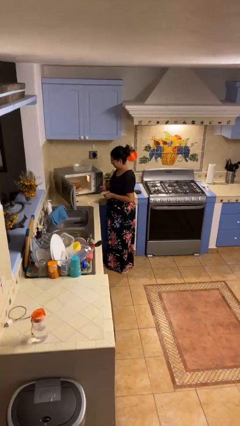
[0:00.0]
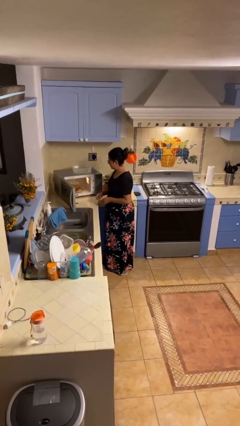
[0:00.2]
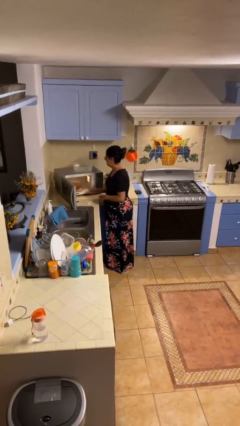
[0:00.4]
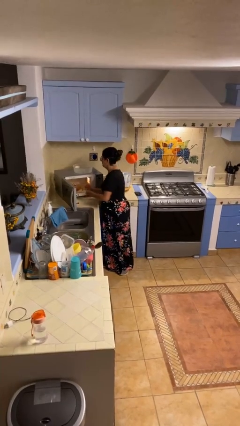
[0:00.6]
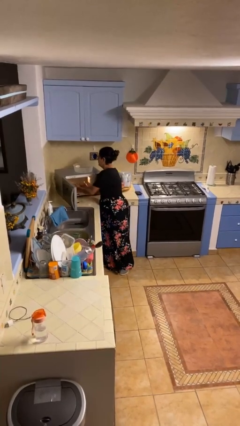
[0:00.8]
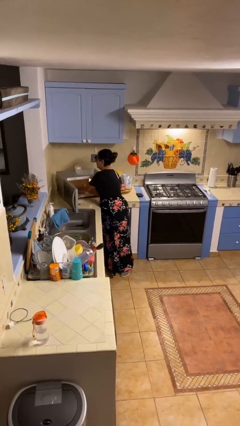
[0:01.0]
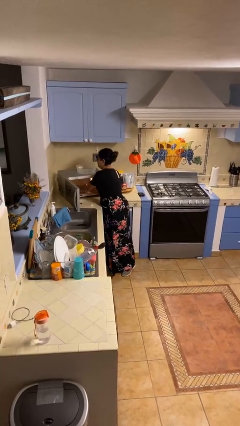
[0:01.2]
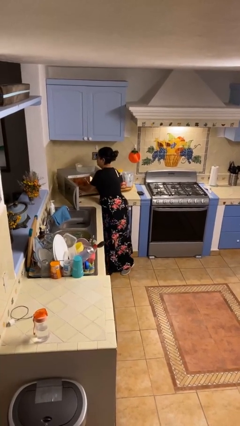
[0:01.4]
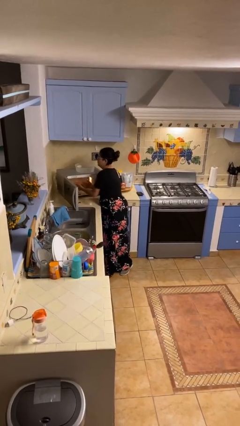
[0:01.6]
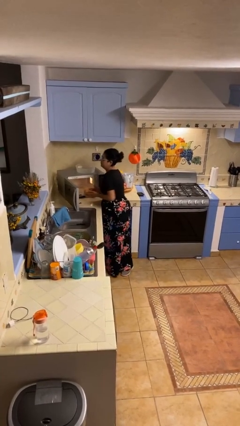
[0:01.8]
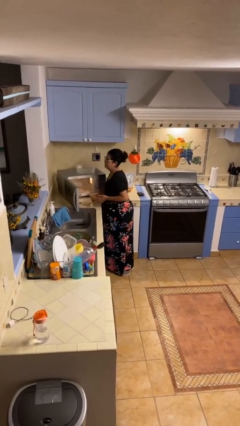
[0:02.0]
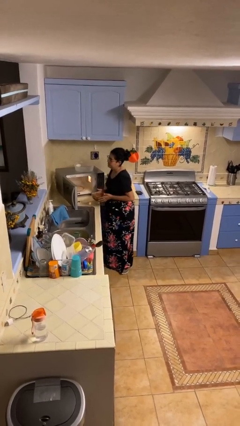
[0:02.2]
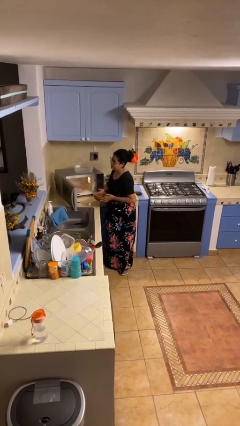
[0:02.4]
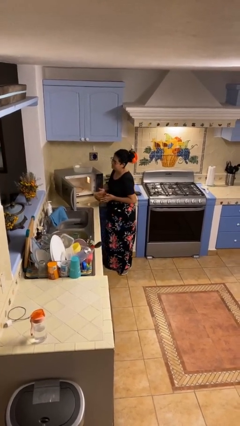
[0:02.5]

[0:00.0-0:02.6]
person takes object from microwave

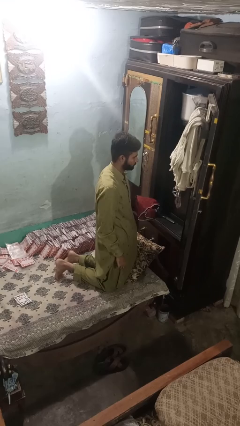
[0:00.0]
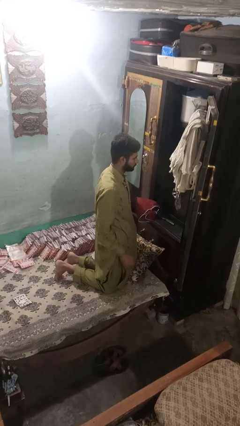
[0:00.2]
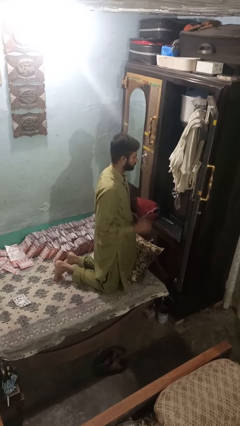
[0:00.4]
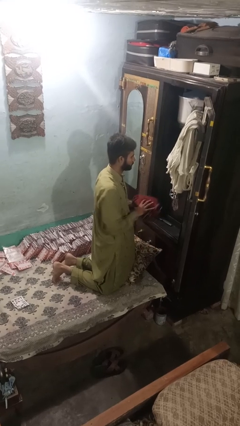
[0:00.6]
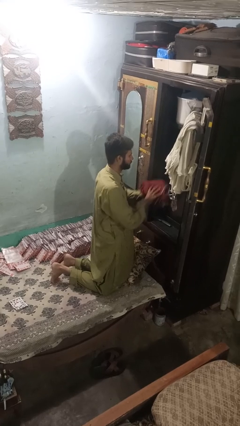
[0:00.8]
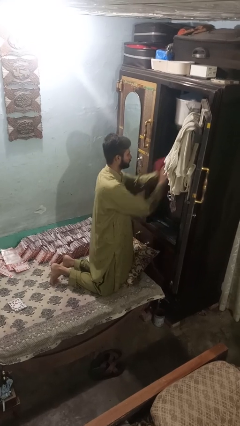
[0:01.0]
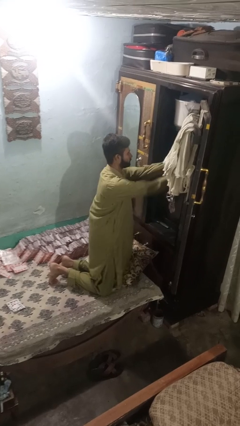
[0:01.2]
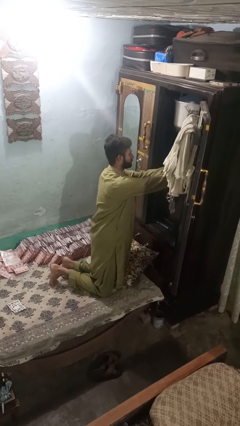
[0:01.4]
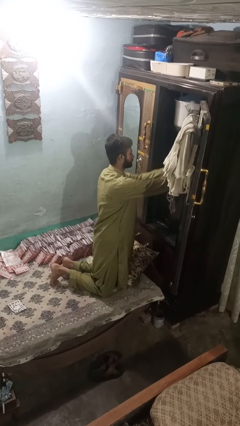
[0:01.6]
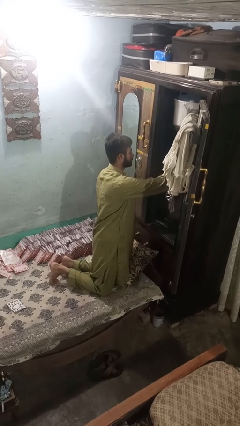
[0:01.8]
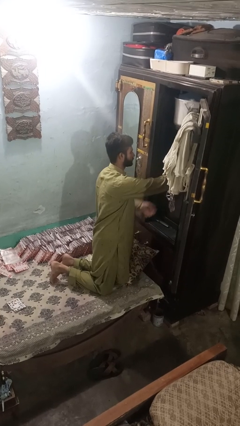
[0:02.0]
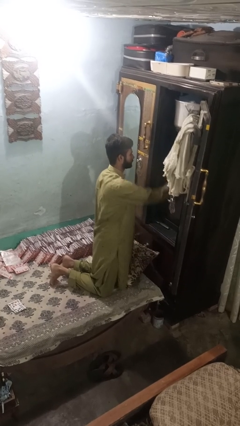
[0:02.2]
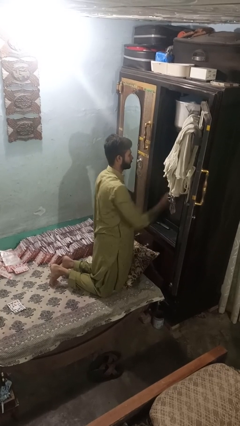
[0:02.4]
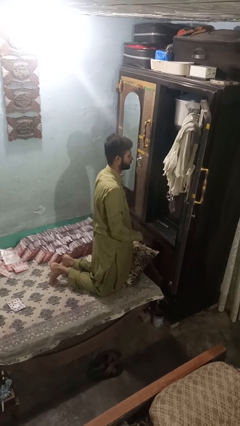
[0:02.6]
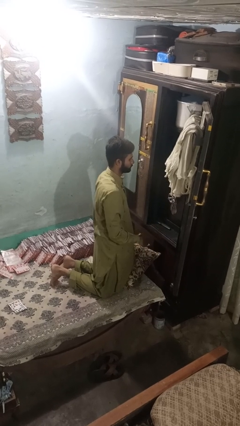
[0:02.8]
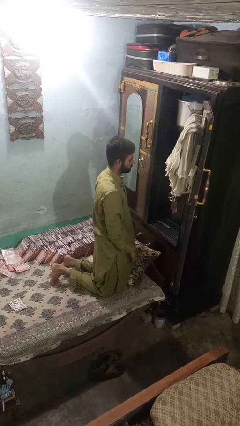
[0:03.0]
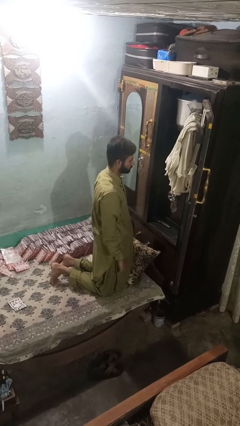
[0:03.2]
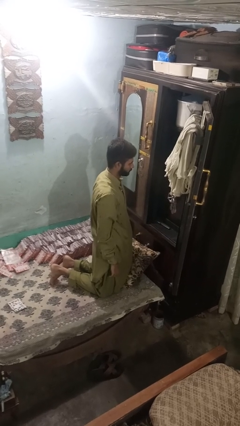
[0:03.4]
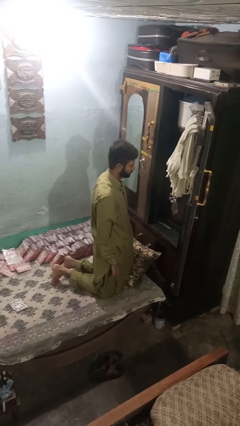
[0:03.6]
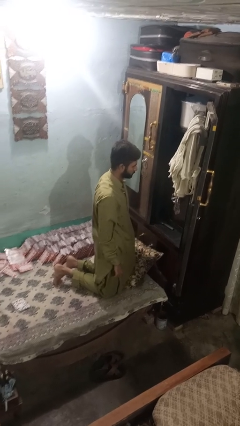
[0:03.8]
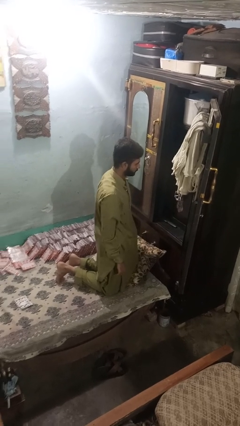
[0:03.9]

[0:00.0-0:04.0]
person puts clothes into dresser

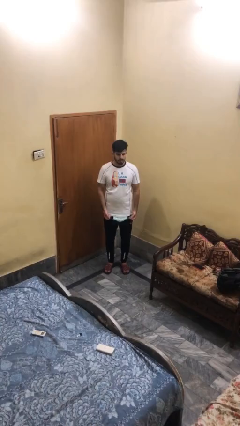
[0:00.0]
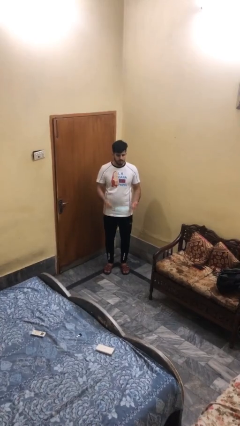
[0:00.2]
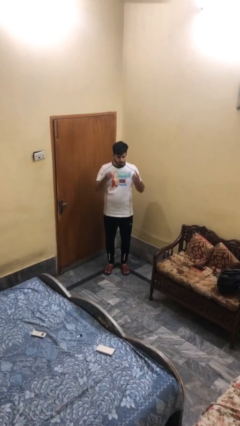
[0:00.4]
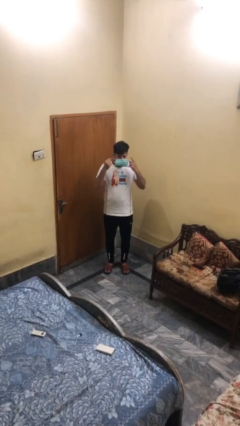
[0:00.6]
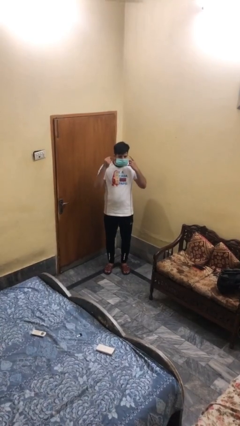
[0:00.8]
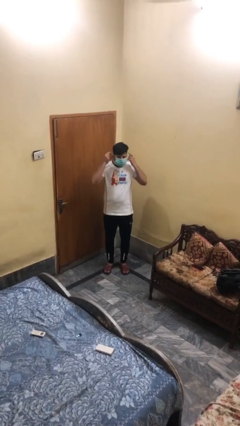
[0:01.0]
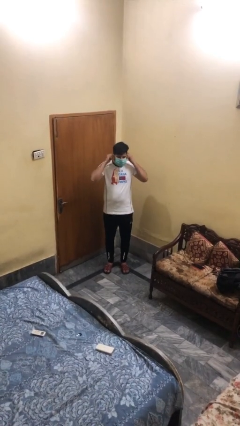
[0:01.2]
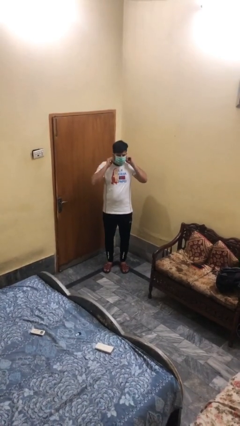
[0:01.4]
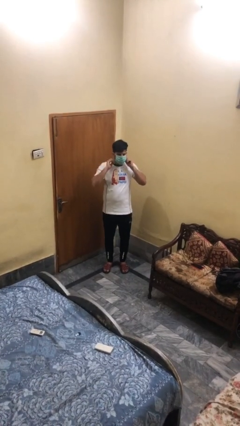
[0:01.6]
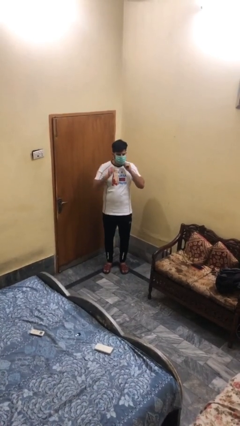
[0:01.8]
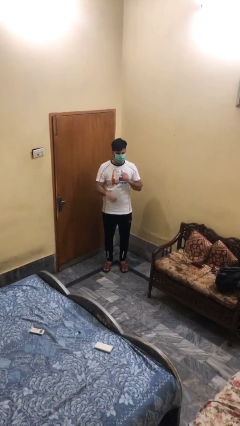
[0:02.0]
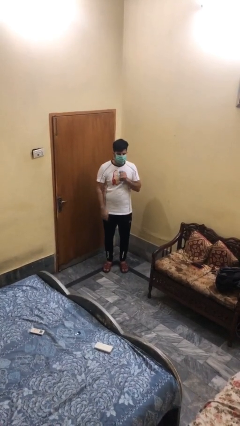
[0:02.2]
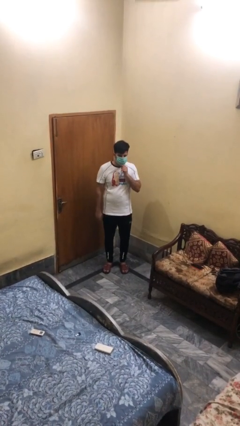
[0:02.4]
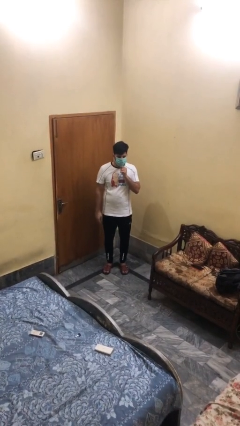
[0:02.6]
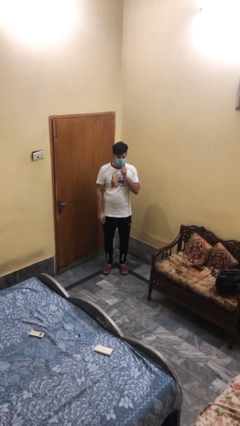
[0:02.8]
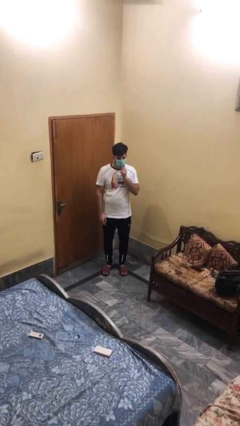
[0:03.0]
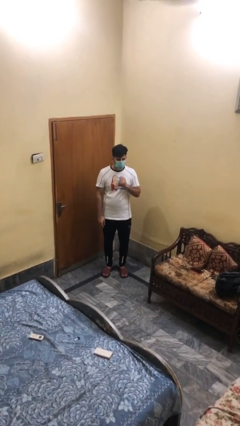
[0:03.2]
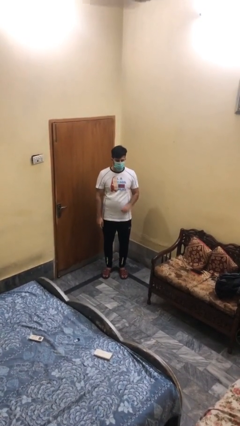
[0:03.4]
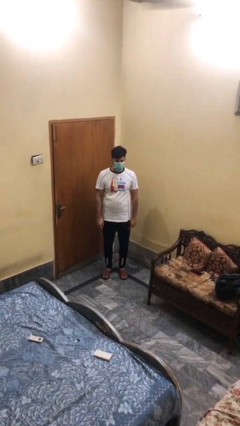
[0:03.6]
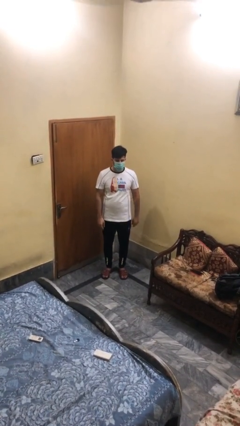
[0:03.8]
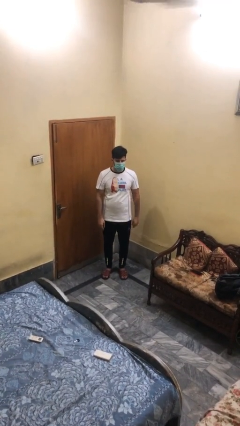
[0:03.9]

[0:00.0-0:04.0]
person puts on facemask

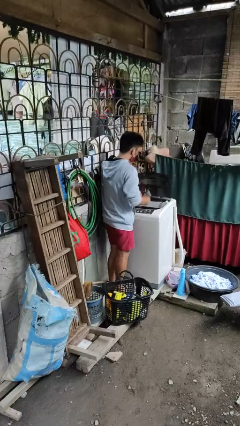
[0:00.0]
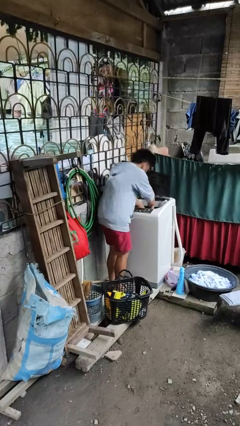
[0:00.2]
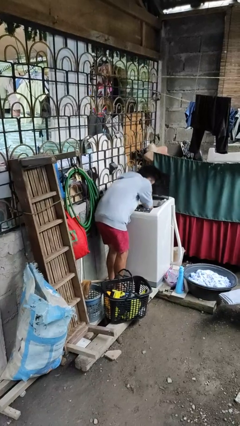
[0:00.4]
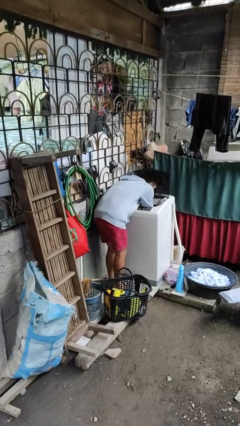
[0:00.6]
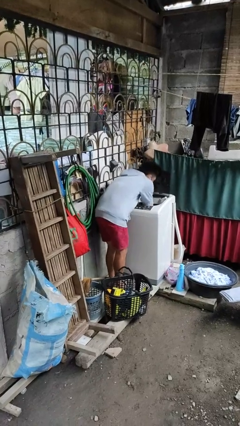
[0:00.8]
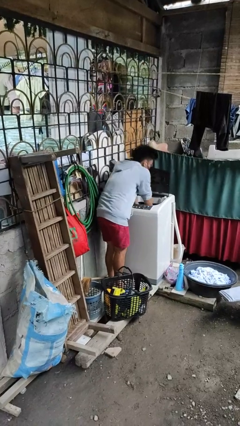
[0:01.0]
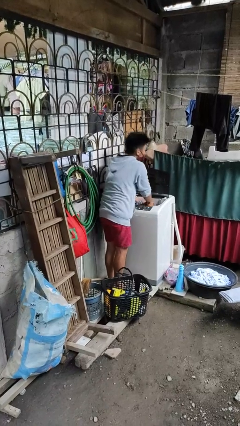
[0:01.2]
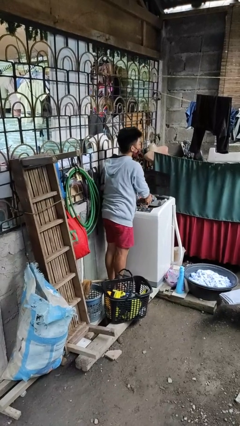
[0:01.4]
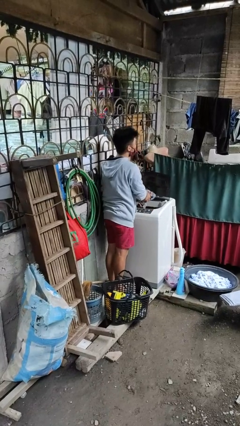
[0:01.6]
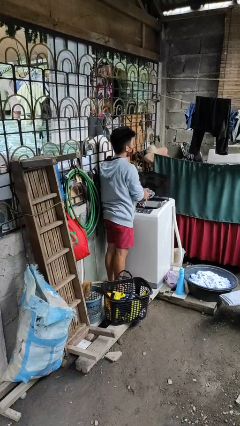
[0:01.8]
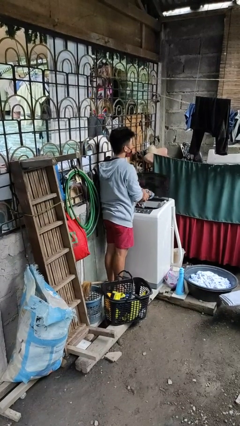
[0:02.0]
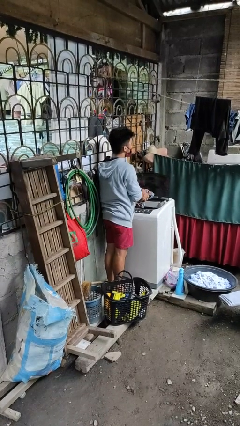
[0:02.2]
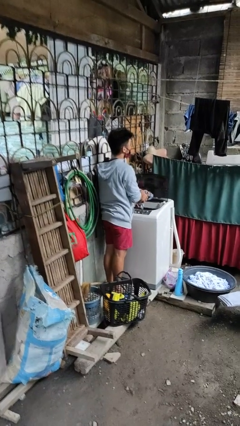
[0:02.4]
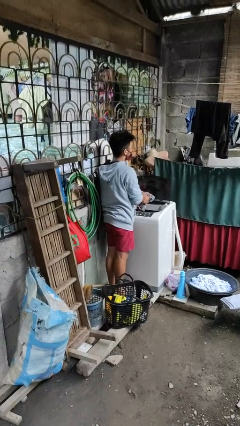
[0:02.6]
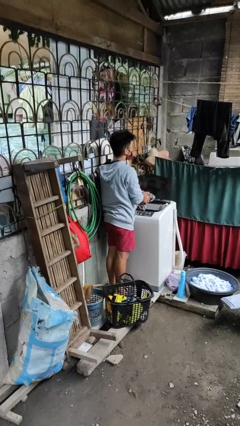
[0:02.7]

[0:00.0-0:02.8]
person unloads clotheswasher

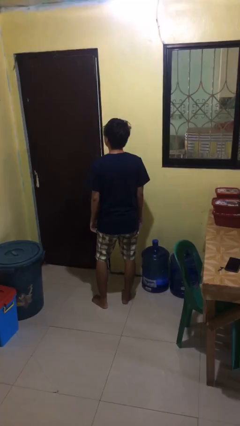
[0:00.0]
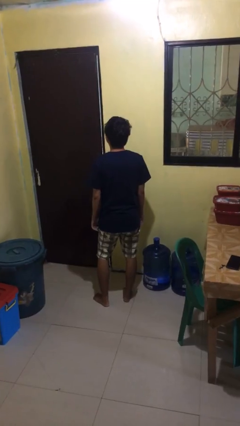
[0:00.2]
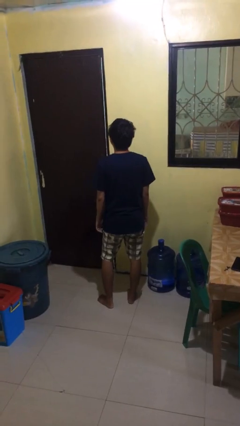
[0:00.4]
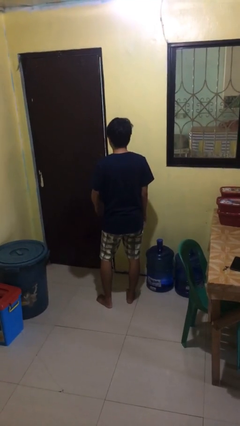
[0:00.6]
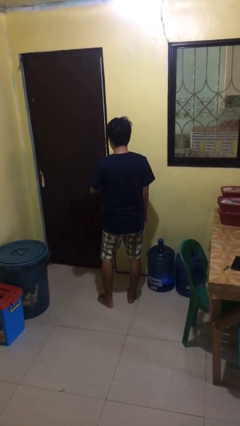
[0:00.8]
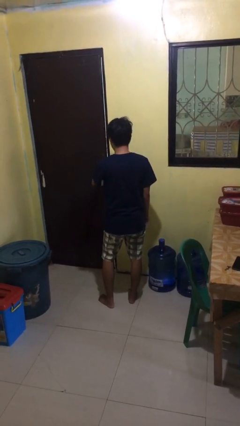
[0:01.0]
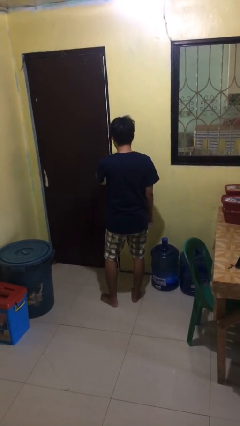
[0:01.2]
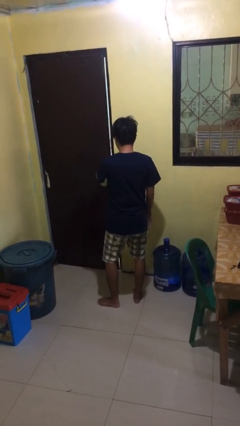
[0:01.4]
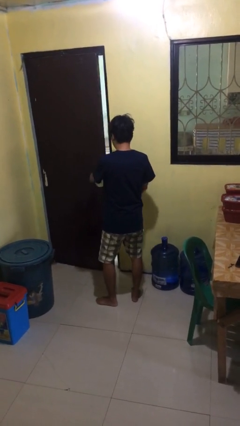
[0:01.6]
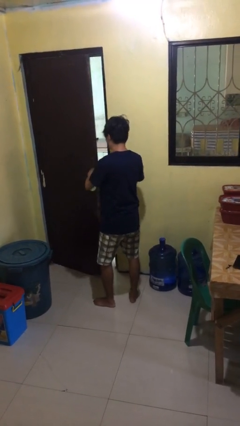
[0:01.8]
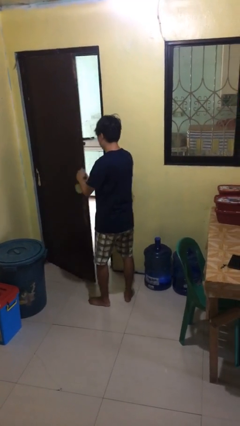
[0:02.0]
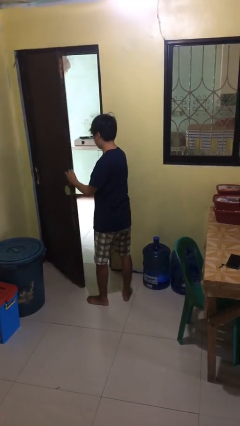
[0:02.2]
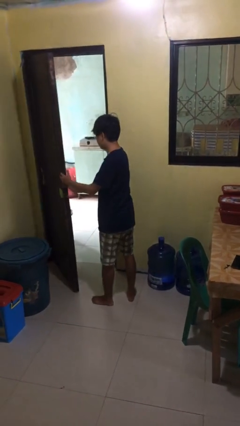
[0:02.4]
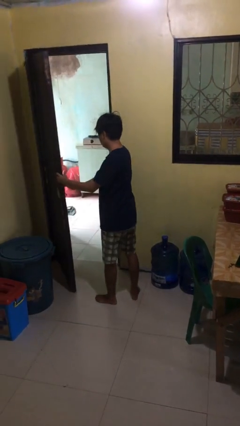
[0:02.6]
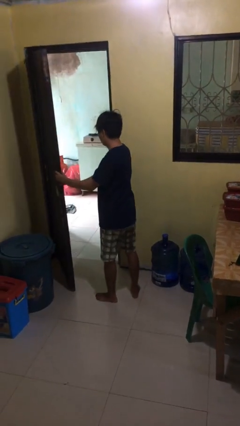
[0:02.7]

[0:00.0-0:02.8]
person opens facility door

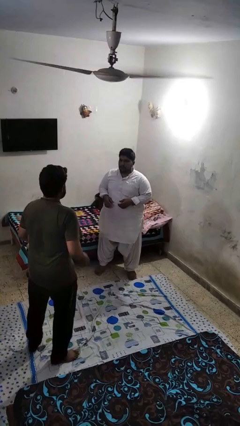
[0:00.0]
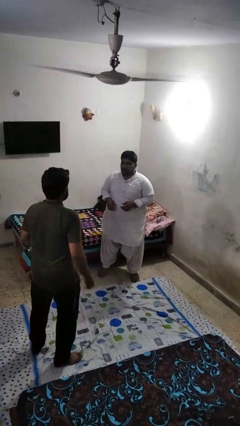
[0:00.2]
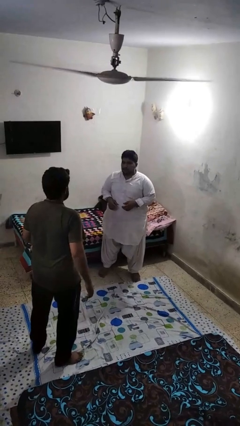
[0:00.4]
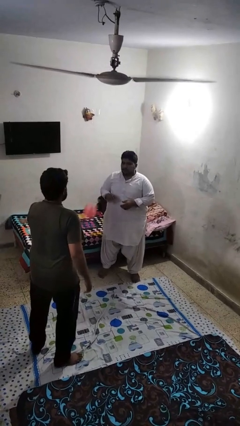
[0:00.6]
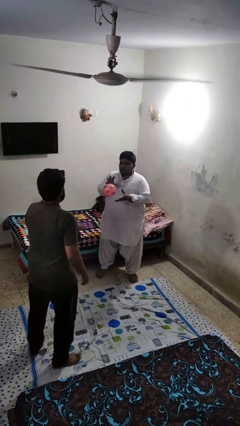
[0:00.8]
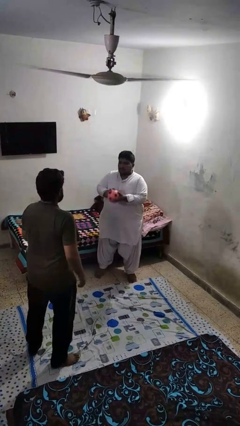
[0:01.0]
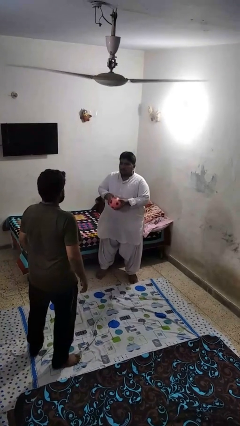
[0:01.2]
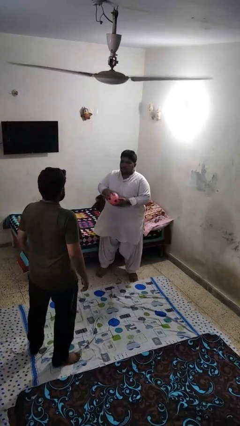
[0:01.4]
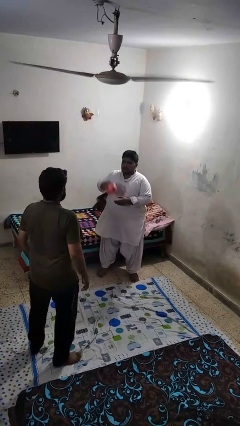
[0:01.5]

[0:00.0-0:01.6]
person catches object from person
